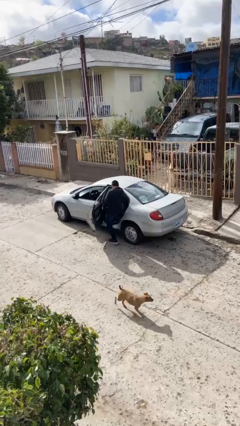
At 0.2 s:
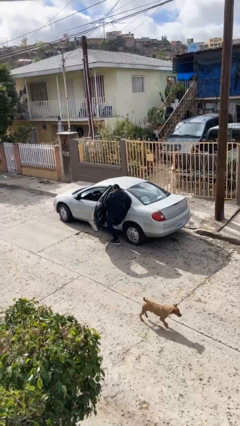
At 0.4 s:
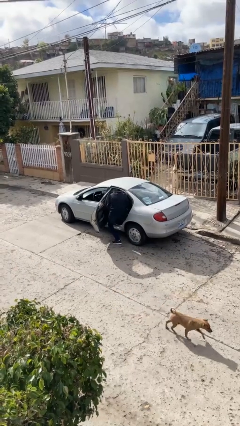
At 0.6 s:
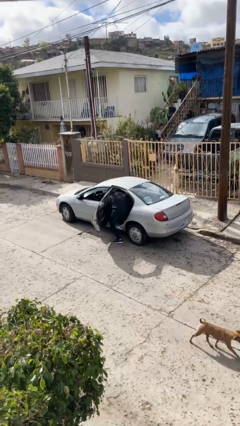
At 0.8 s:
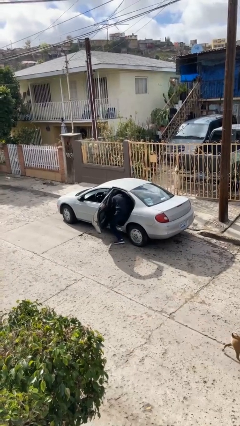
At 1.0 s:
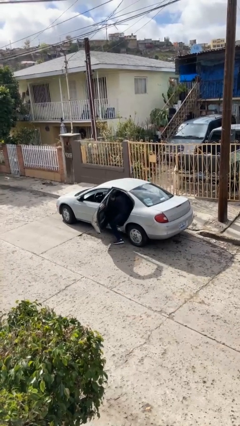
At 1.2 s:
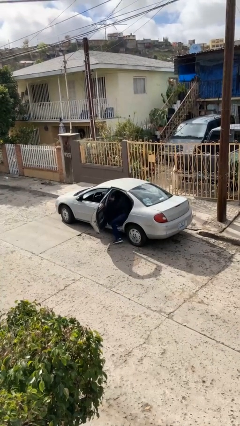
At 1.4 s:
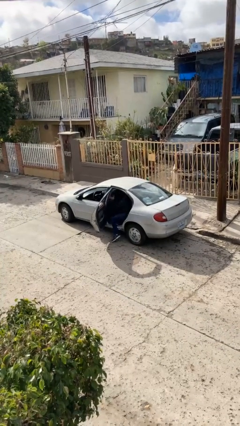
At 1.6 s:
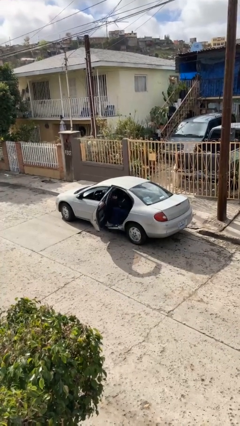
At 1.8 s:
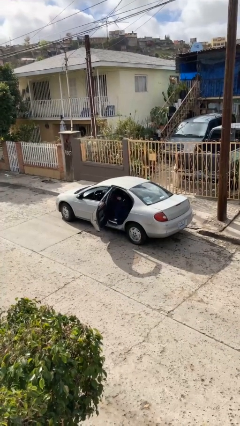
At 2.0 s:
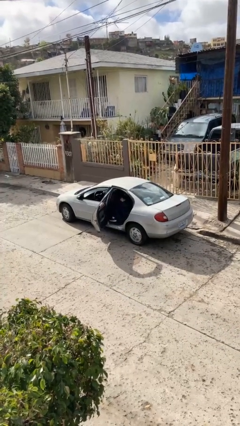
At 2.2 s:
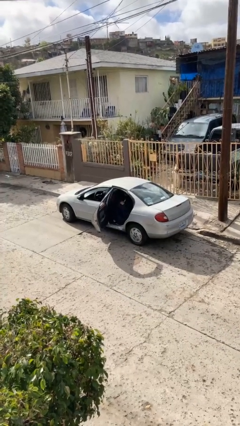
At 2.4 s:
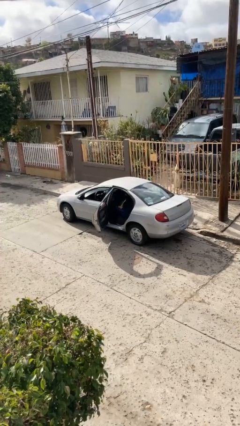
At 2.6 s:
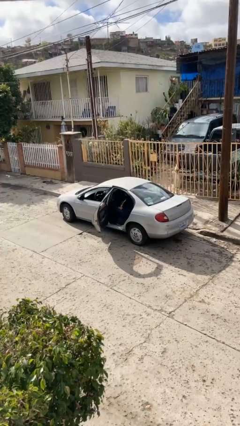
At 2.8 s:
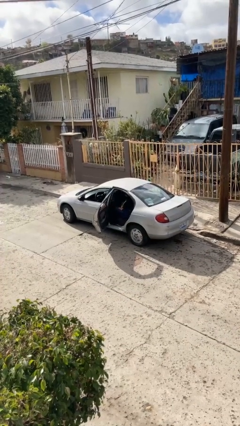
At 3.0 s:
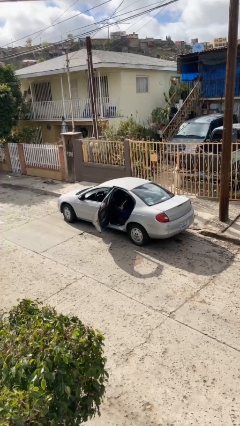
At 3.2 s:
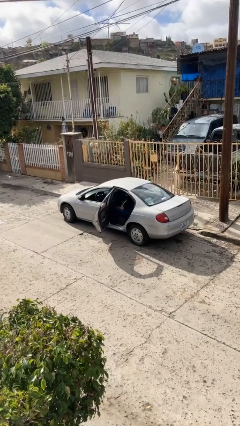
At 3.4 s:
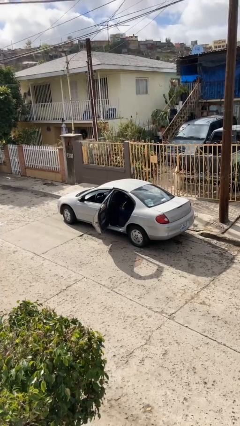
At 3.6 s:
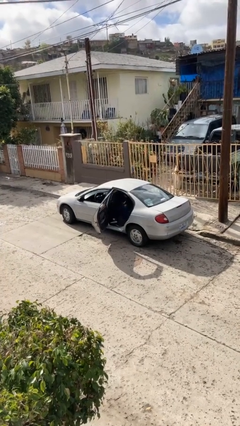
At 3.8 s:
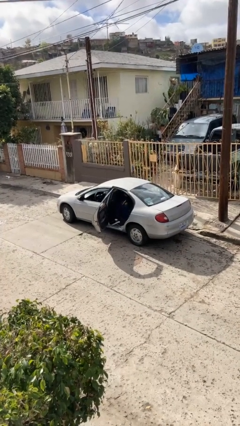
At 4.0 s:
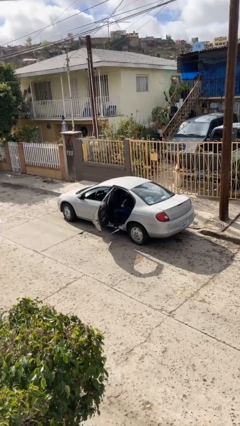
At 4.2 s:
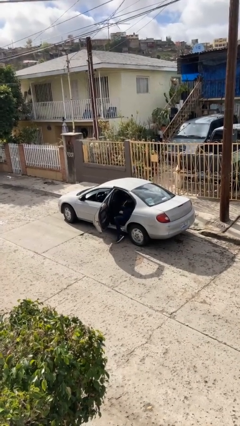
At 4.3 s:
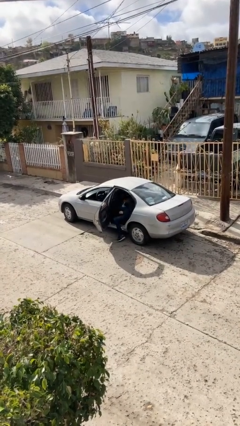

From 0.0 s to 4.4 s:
person enters car

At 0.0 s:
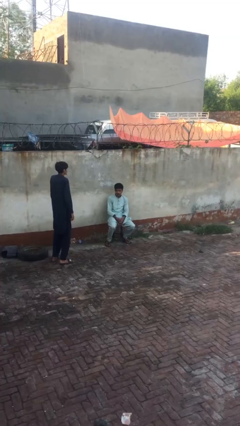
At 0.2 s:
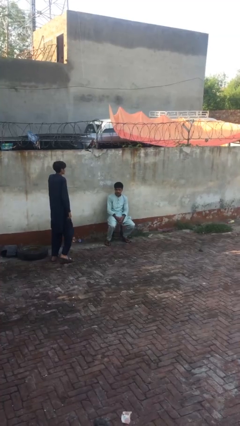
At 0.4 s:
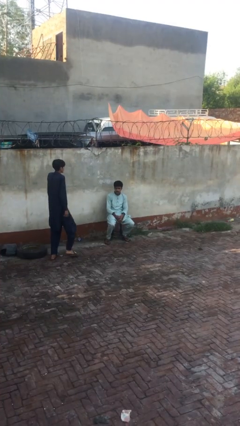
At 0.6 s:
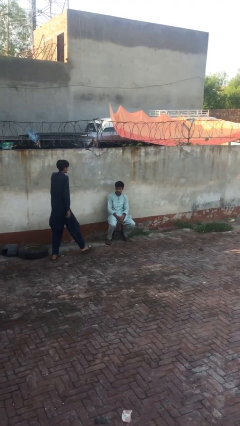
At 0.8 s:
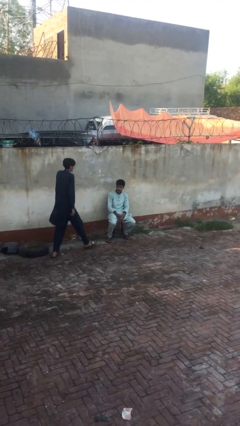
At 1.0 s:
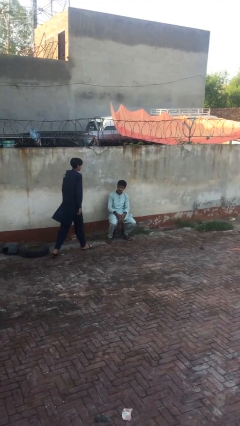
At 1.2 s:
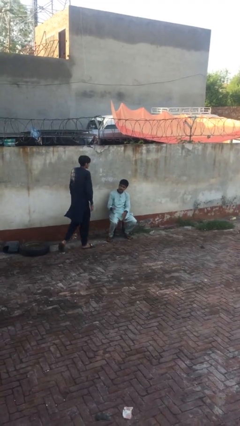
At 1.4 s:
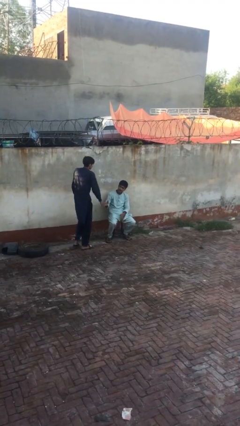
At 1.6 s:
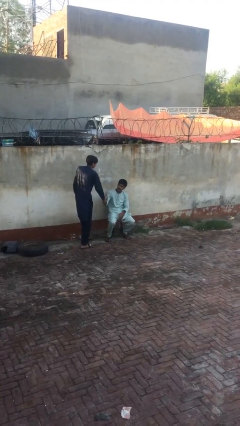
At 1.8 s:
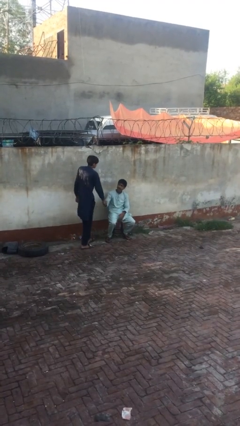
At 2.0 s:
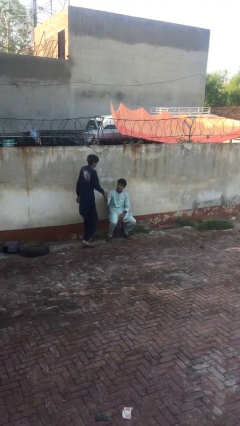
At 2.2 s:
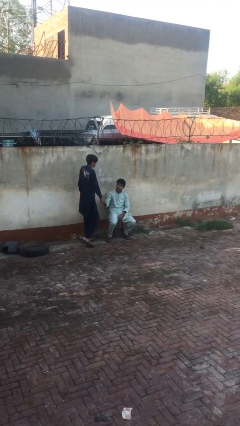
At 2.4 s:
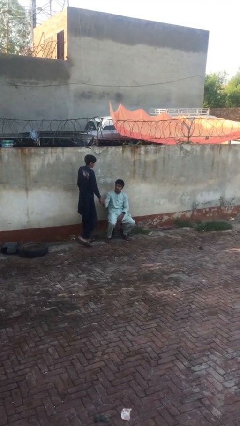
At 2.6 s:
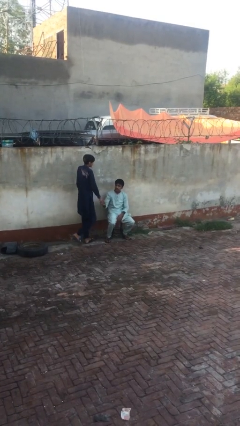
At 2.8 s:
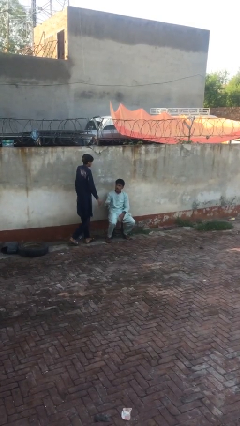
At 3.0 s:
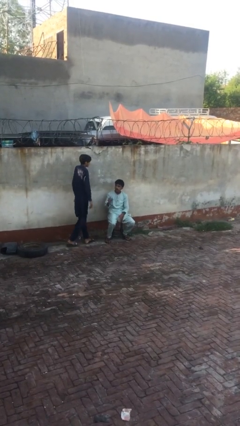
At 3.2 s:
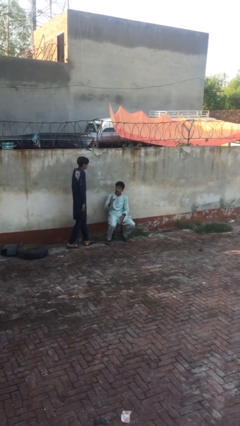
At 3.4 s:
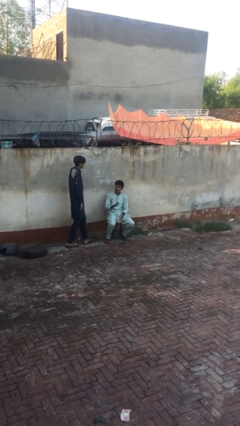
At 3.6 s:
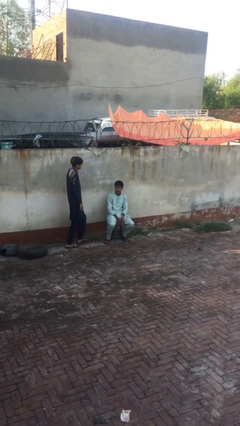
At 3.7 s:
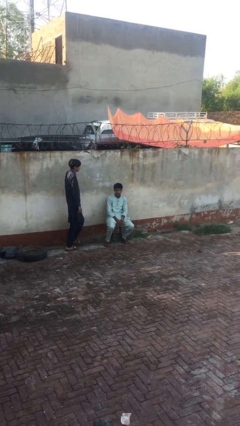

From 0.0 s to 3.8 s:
person shakes hand

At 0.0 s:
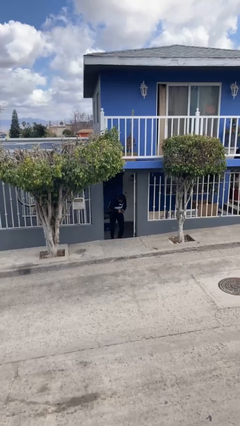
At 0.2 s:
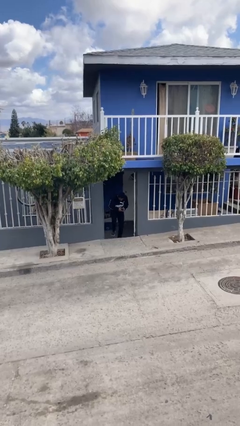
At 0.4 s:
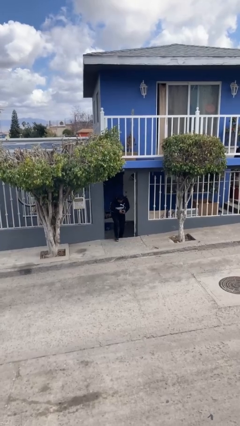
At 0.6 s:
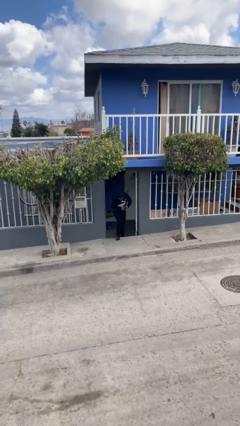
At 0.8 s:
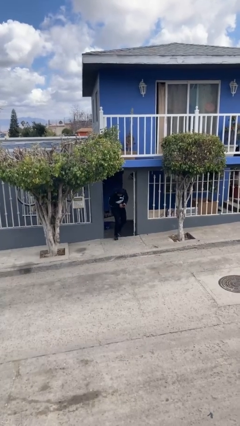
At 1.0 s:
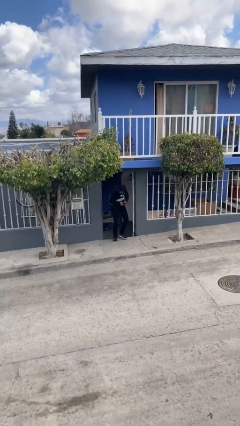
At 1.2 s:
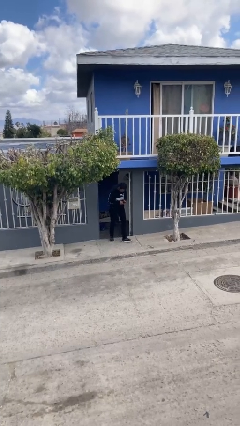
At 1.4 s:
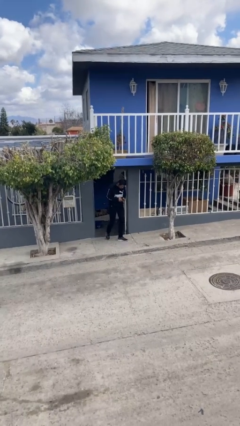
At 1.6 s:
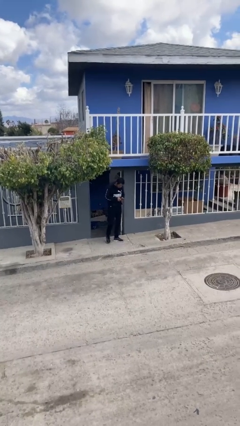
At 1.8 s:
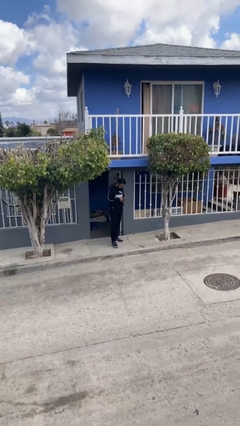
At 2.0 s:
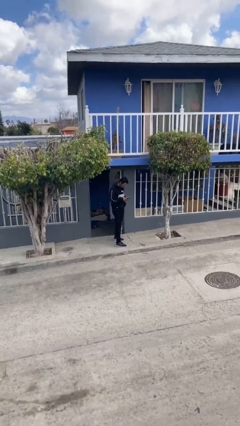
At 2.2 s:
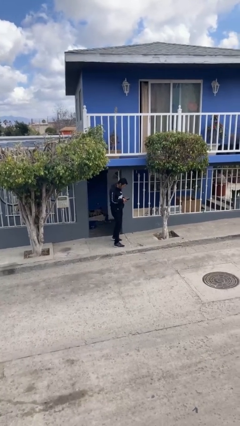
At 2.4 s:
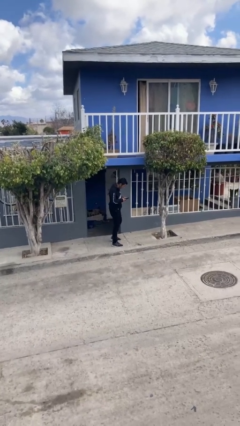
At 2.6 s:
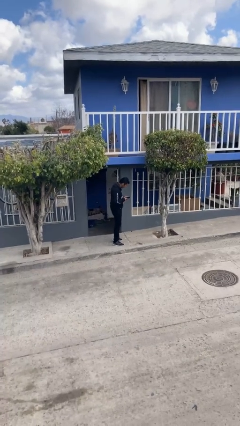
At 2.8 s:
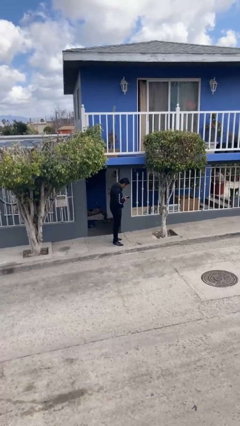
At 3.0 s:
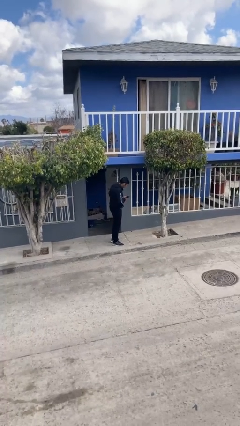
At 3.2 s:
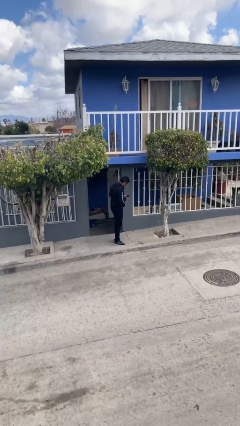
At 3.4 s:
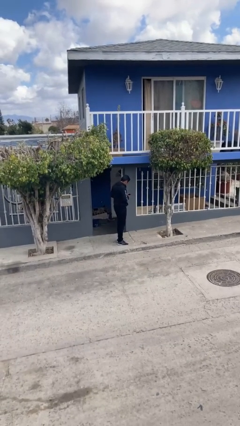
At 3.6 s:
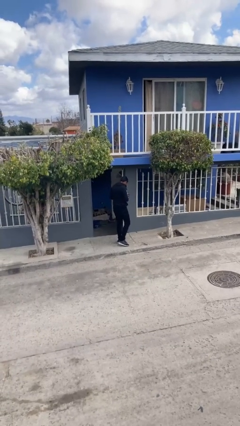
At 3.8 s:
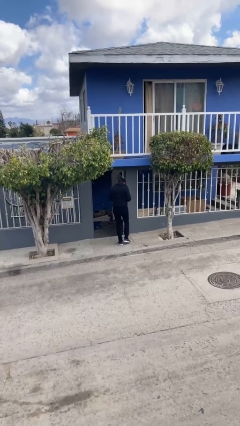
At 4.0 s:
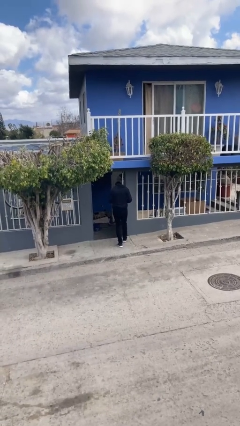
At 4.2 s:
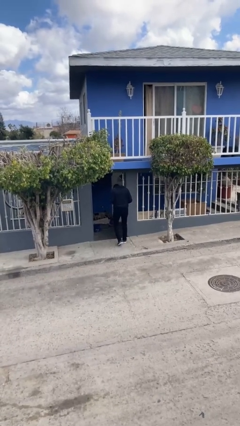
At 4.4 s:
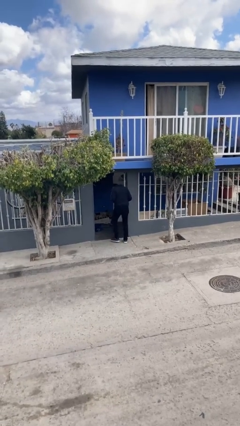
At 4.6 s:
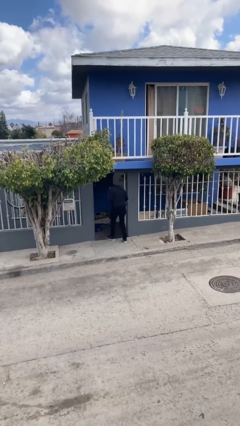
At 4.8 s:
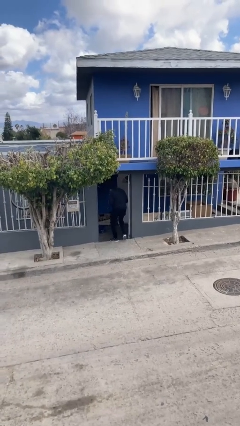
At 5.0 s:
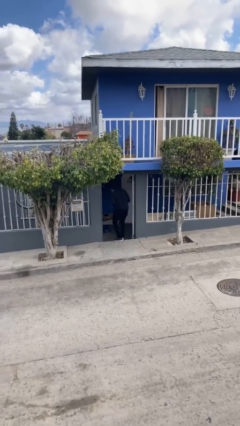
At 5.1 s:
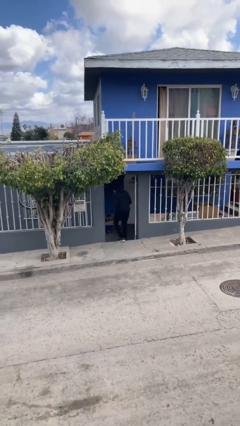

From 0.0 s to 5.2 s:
person enters scene through structure

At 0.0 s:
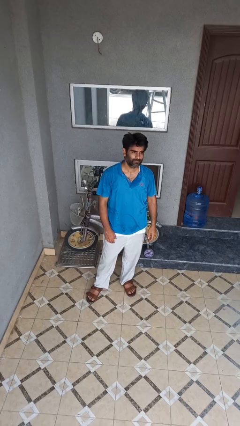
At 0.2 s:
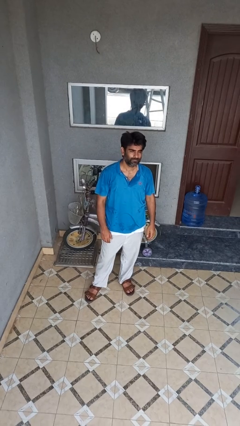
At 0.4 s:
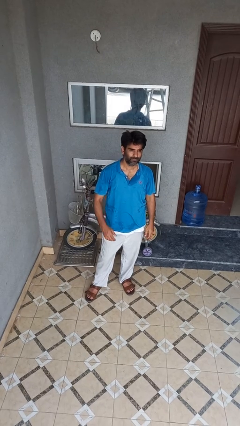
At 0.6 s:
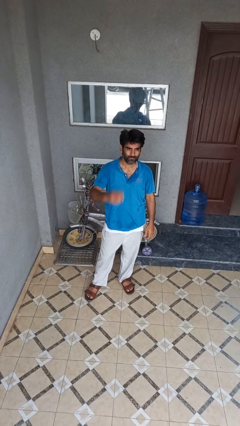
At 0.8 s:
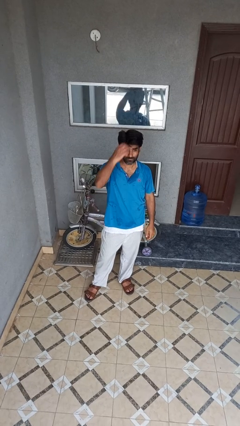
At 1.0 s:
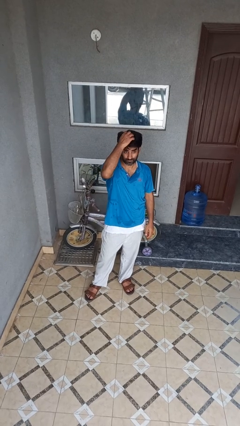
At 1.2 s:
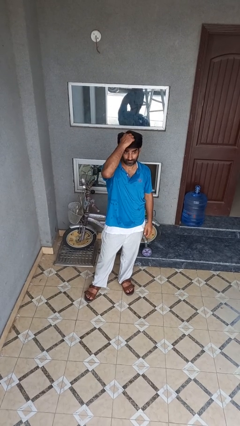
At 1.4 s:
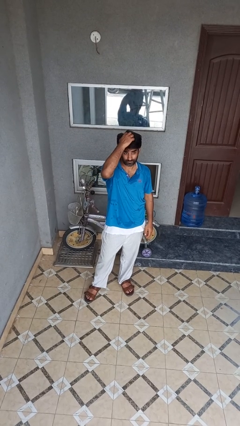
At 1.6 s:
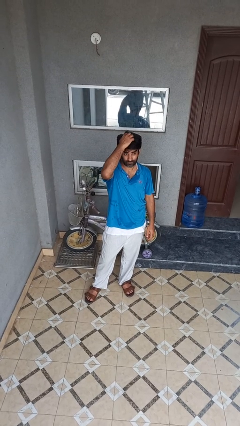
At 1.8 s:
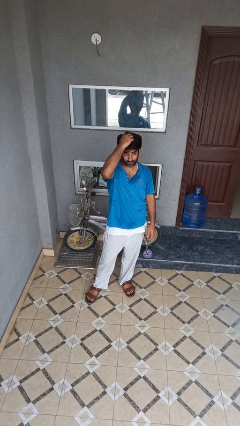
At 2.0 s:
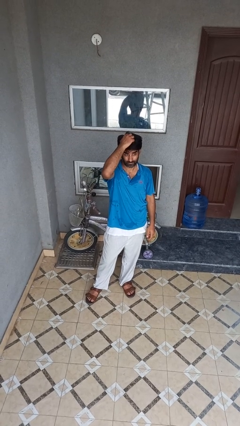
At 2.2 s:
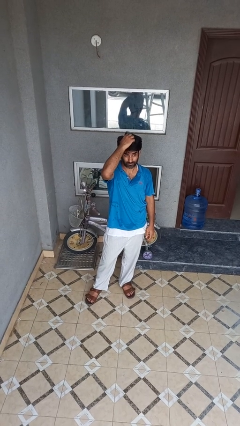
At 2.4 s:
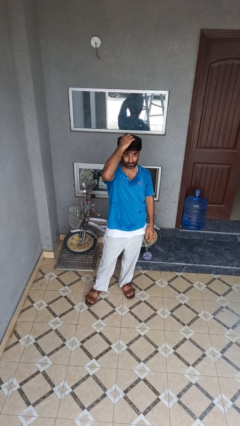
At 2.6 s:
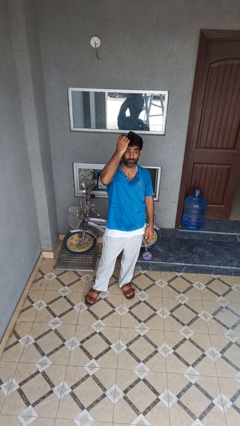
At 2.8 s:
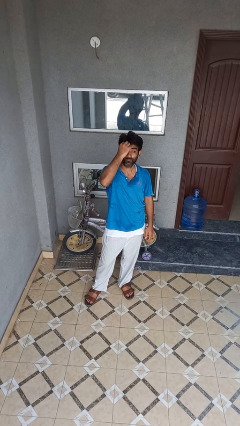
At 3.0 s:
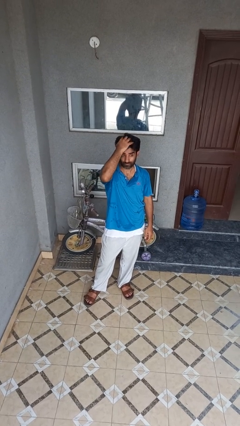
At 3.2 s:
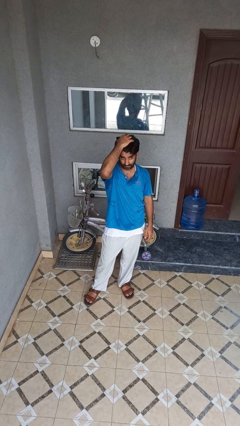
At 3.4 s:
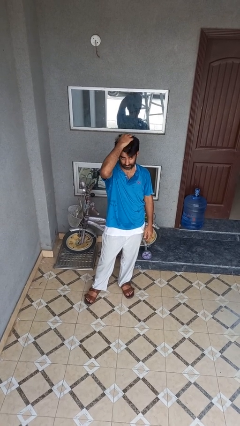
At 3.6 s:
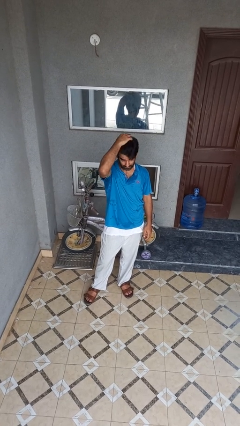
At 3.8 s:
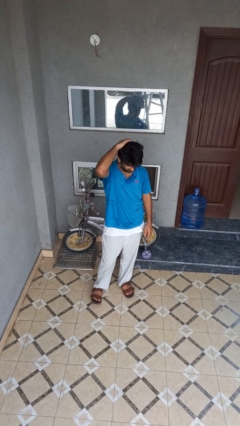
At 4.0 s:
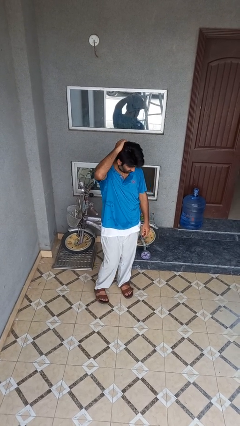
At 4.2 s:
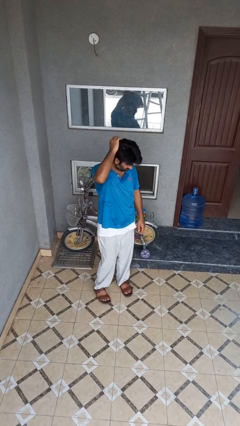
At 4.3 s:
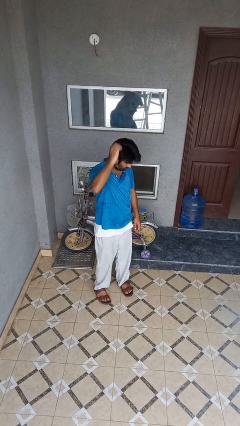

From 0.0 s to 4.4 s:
person scratches face
